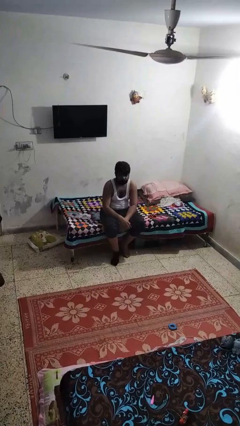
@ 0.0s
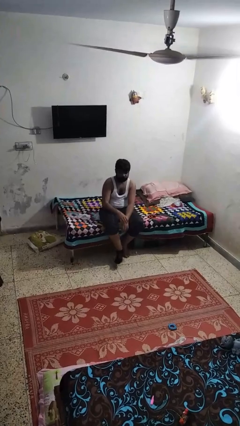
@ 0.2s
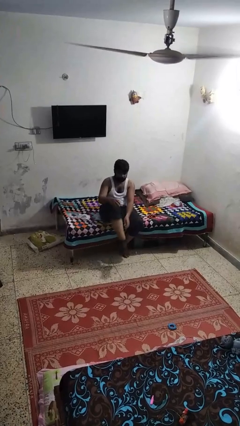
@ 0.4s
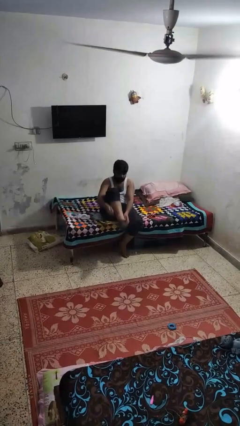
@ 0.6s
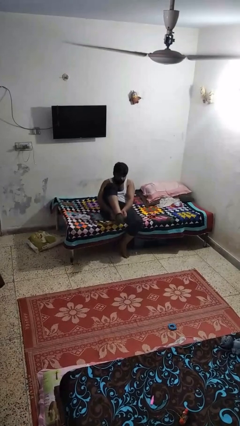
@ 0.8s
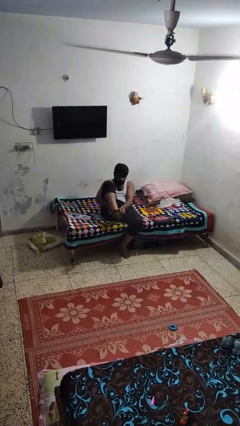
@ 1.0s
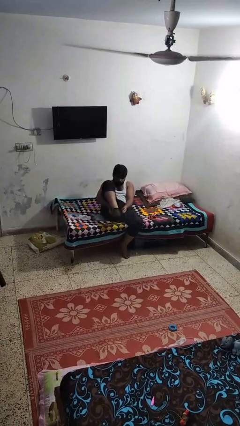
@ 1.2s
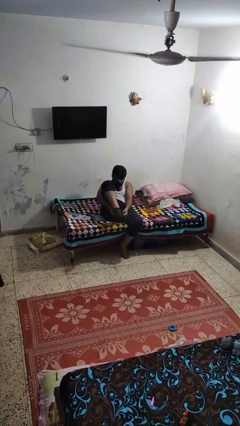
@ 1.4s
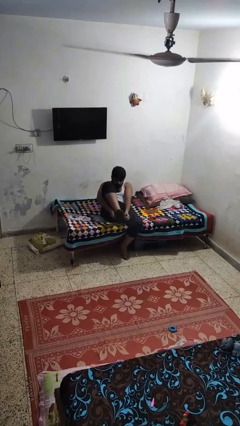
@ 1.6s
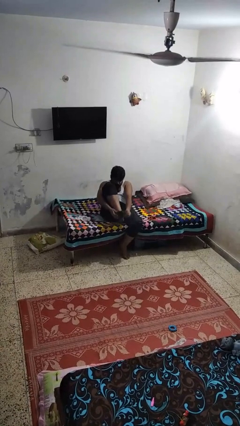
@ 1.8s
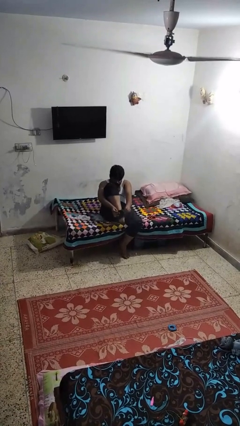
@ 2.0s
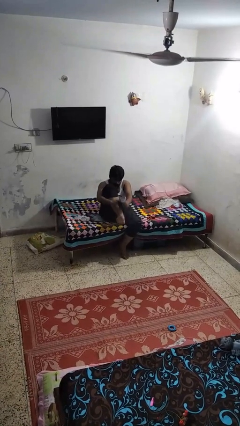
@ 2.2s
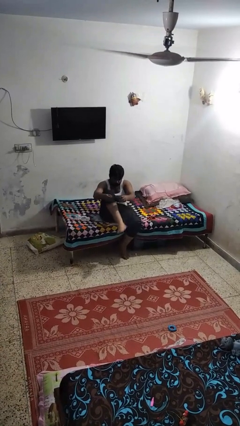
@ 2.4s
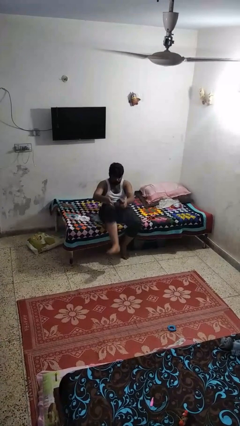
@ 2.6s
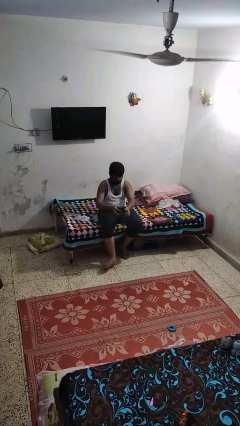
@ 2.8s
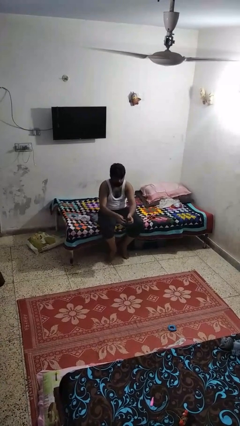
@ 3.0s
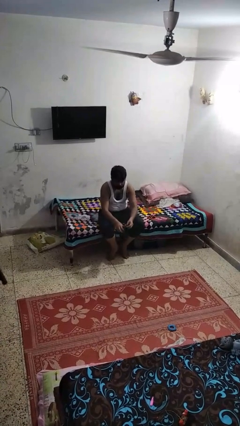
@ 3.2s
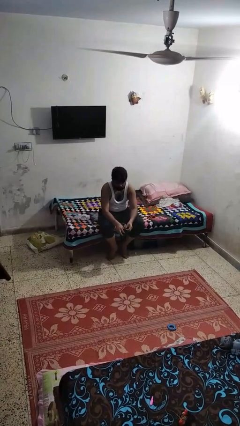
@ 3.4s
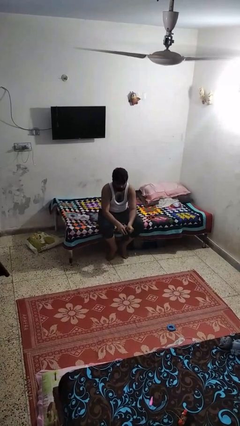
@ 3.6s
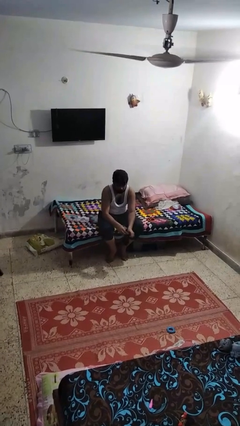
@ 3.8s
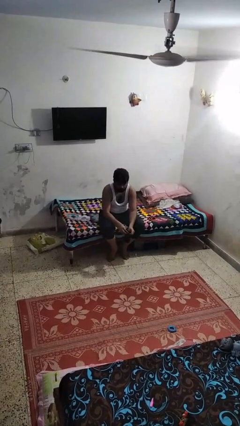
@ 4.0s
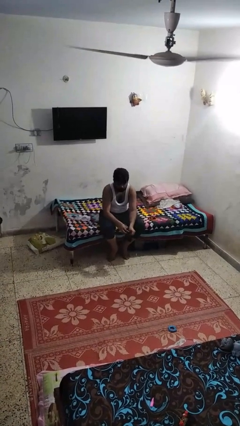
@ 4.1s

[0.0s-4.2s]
person takes off socks

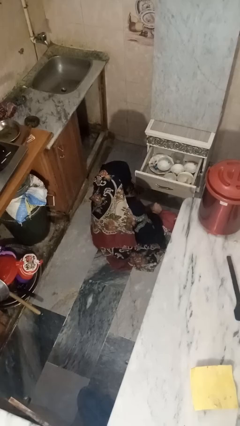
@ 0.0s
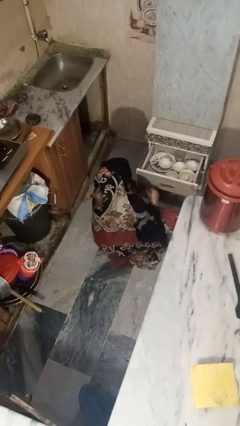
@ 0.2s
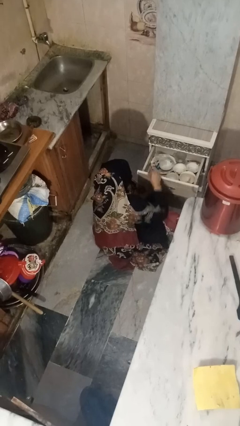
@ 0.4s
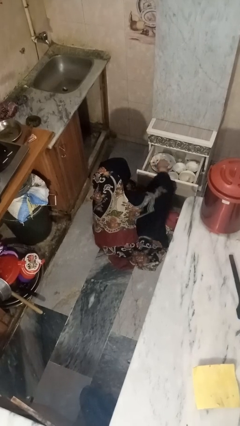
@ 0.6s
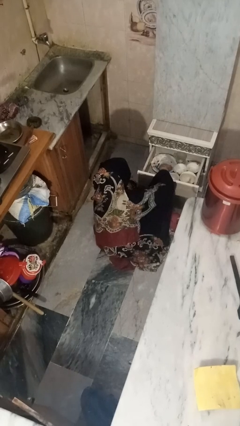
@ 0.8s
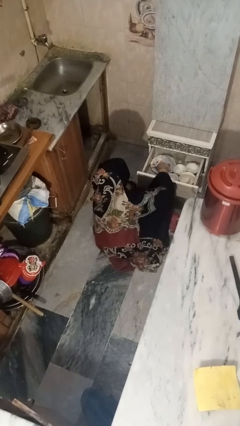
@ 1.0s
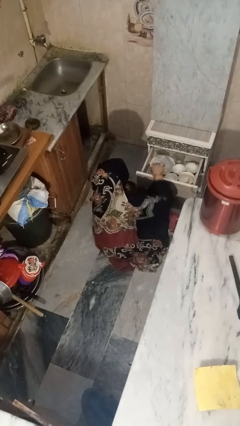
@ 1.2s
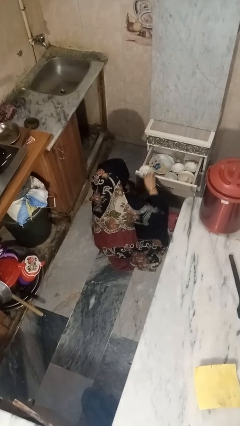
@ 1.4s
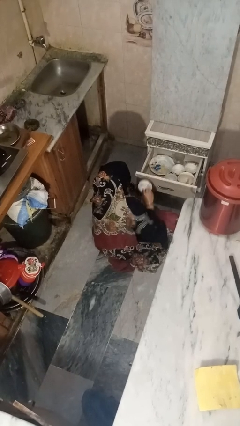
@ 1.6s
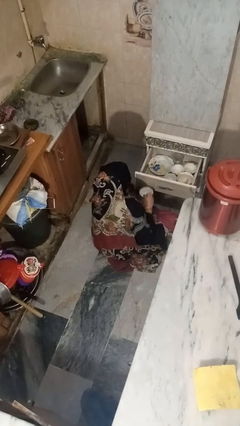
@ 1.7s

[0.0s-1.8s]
person takes object from kitchen drawer

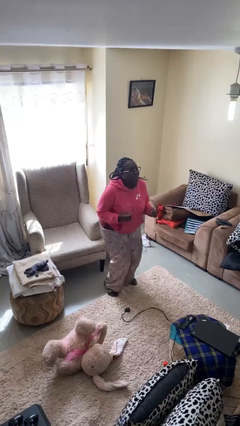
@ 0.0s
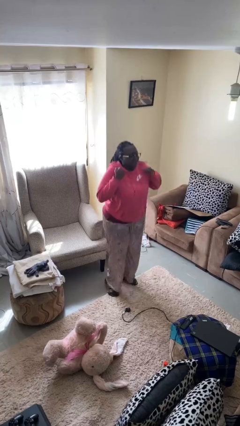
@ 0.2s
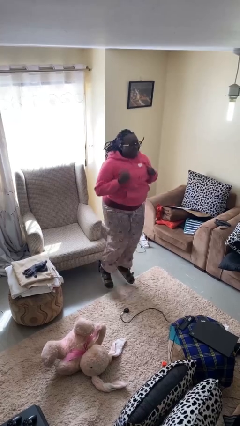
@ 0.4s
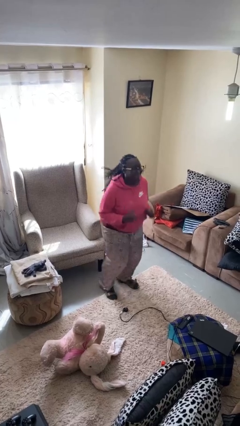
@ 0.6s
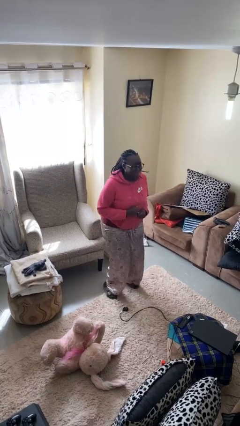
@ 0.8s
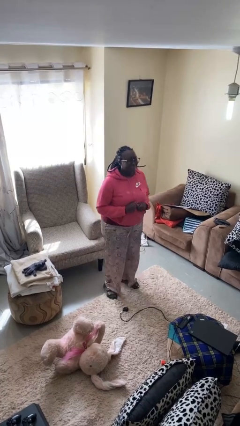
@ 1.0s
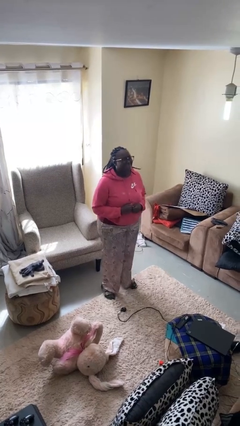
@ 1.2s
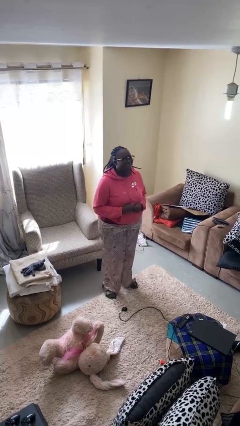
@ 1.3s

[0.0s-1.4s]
person jumps

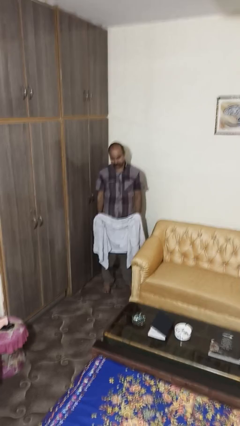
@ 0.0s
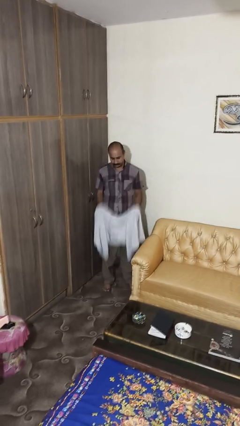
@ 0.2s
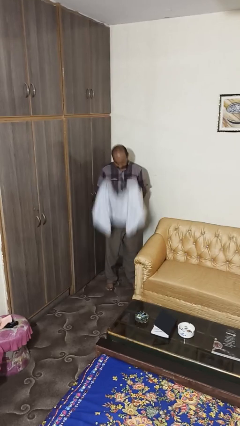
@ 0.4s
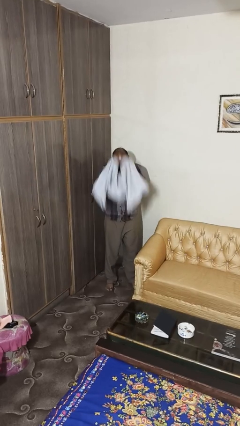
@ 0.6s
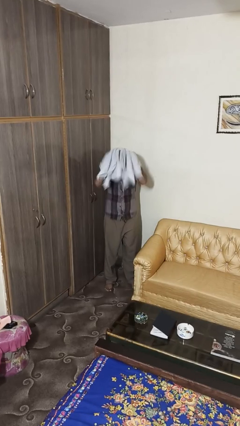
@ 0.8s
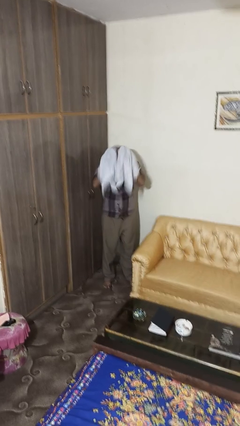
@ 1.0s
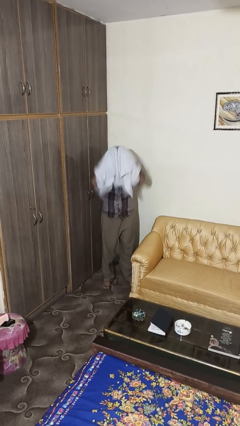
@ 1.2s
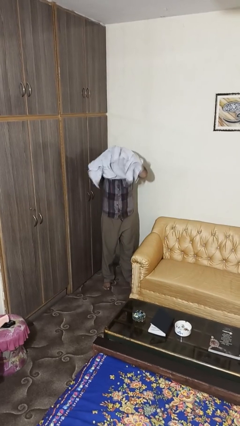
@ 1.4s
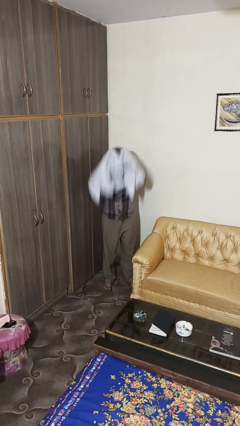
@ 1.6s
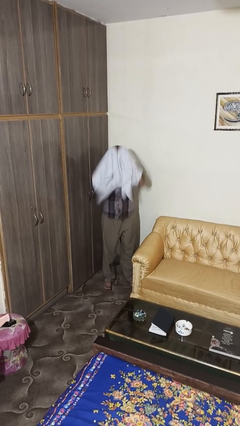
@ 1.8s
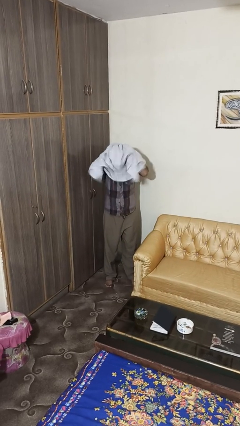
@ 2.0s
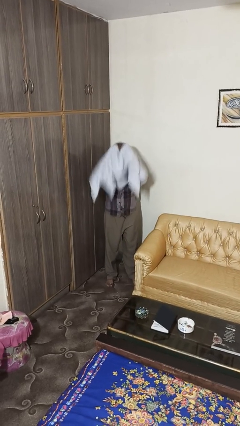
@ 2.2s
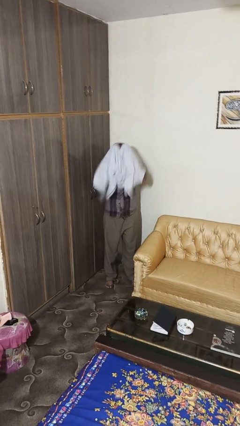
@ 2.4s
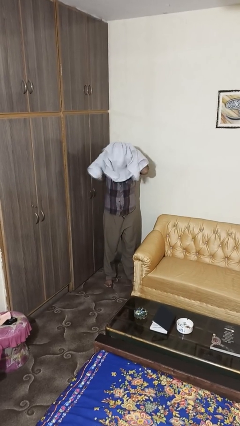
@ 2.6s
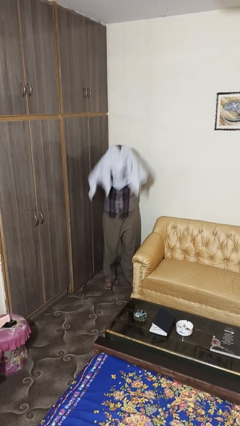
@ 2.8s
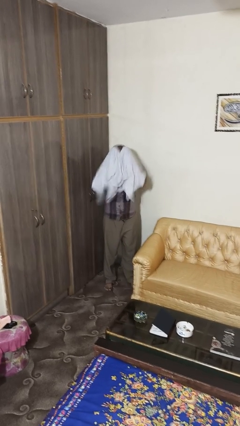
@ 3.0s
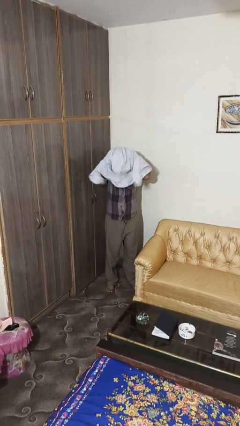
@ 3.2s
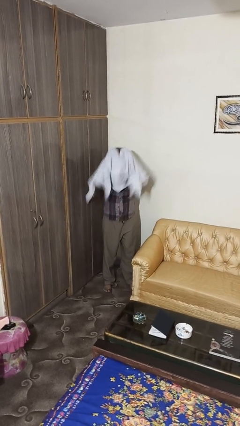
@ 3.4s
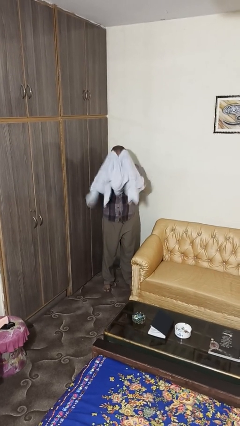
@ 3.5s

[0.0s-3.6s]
person dries hair with towel

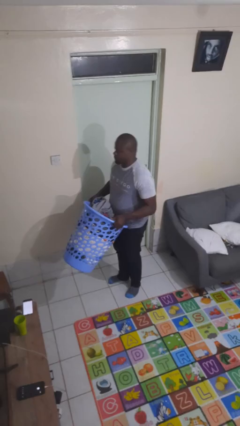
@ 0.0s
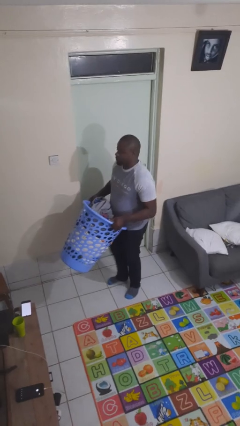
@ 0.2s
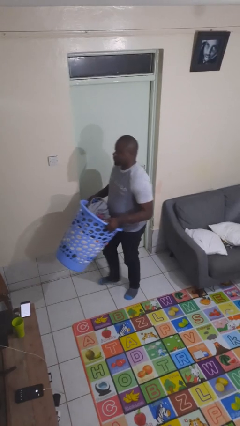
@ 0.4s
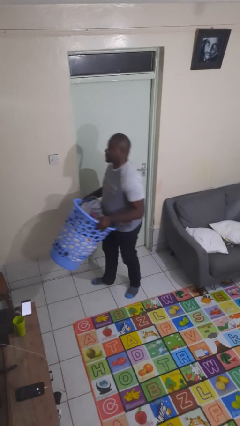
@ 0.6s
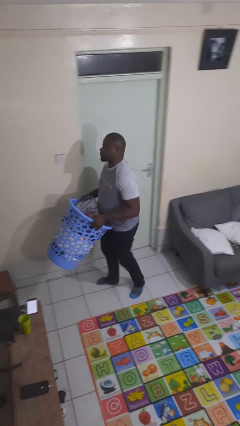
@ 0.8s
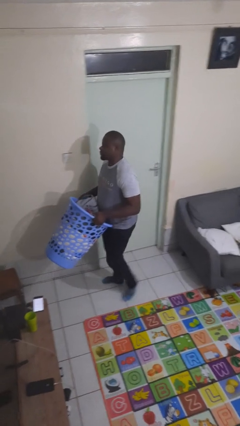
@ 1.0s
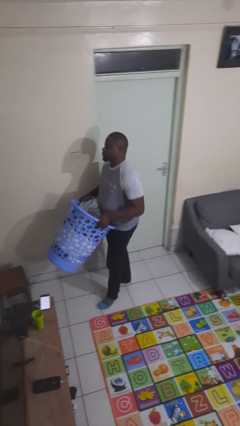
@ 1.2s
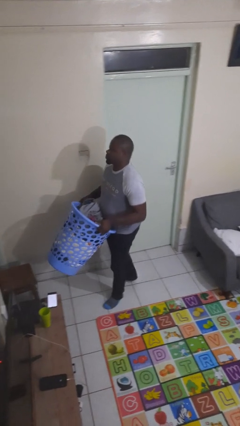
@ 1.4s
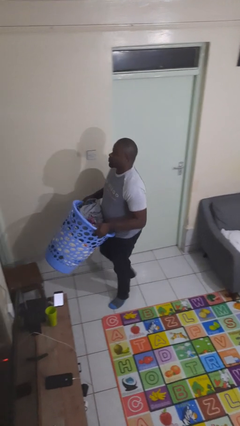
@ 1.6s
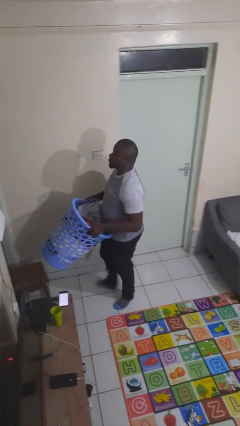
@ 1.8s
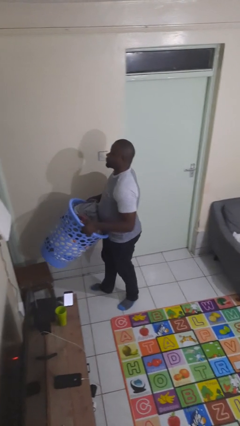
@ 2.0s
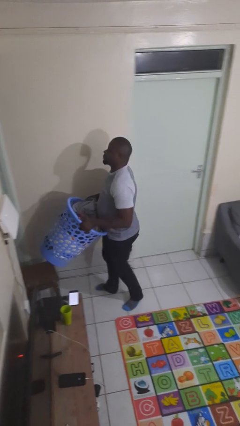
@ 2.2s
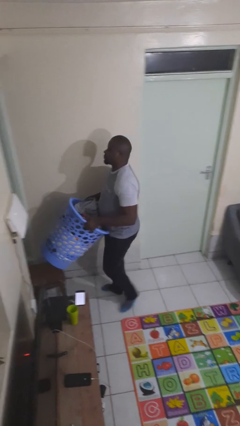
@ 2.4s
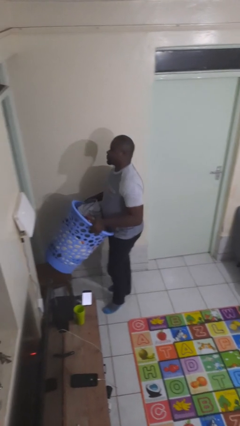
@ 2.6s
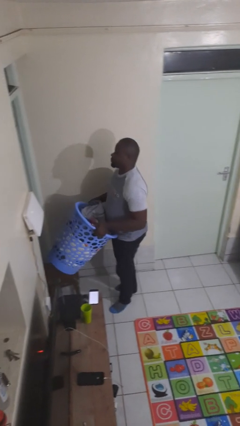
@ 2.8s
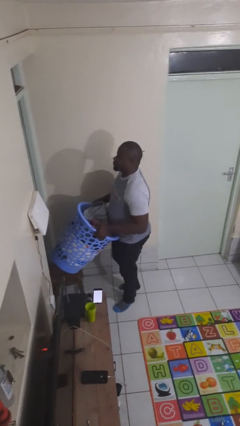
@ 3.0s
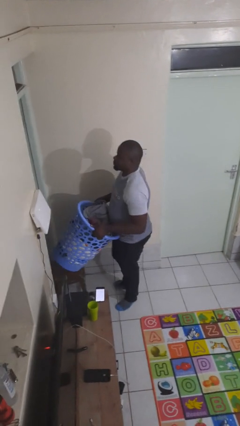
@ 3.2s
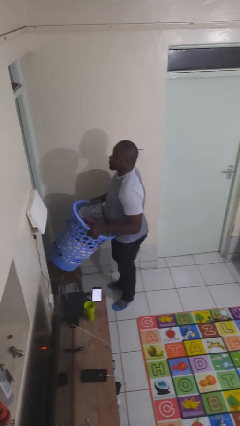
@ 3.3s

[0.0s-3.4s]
person carries laundry basket

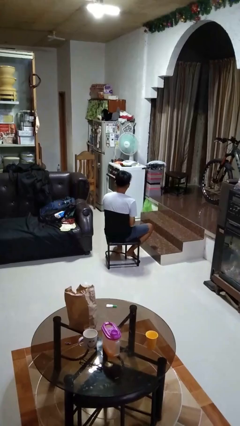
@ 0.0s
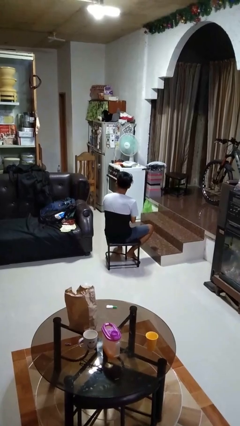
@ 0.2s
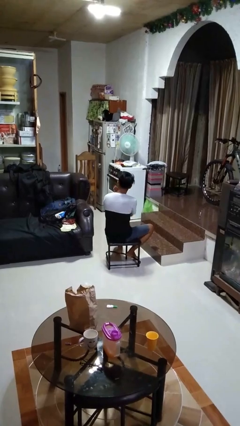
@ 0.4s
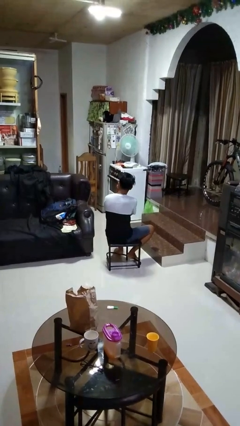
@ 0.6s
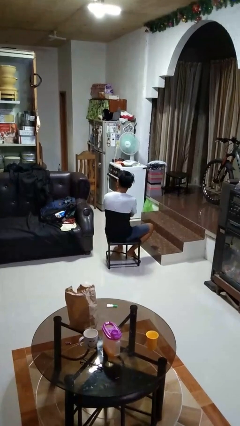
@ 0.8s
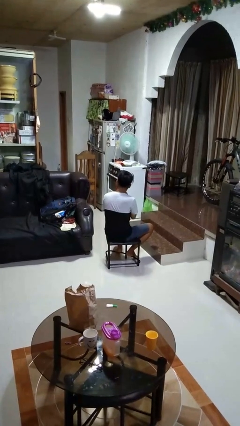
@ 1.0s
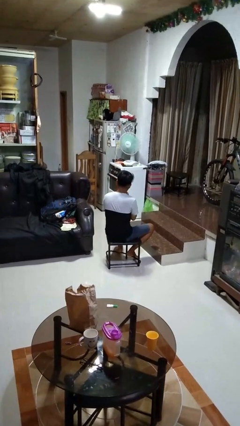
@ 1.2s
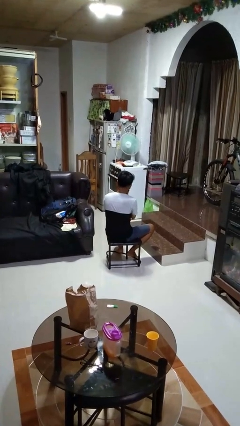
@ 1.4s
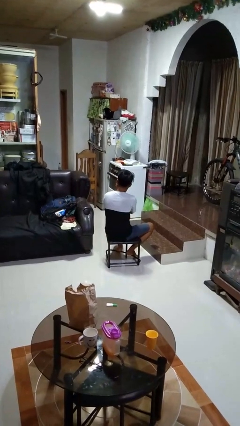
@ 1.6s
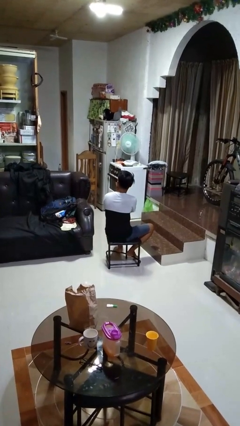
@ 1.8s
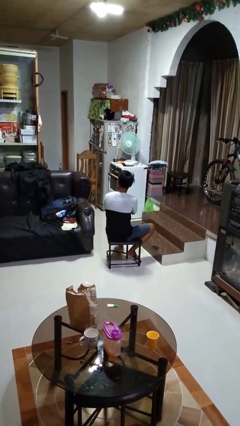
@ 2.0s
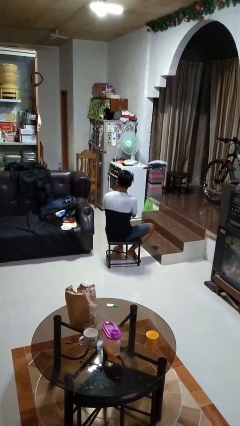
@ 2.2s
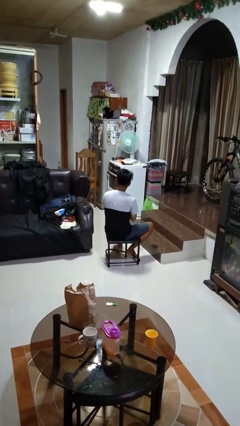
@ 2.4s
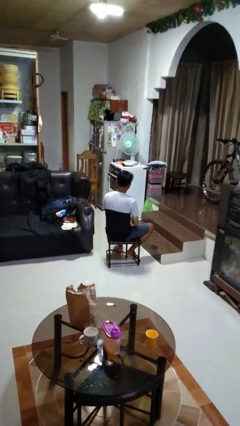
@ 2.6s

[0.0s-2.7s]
person strokes chin

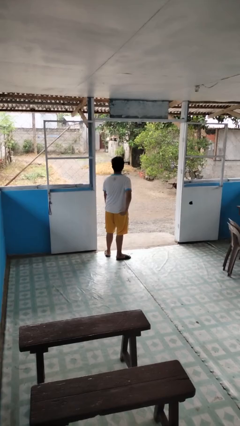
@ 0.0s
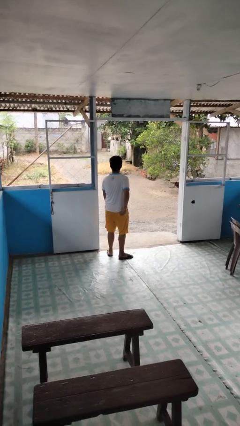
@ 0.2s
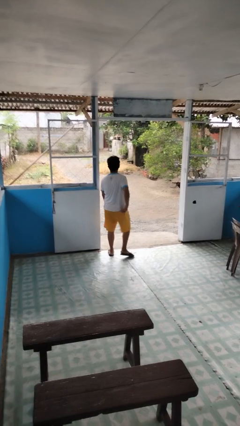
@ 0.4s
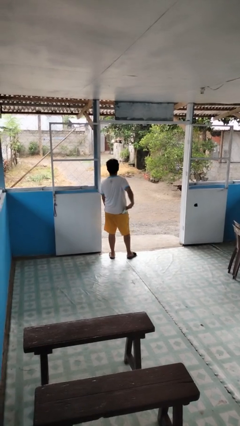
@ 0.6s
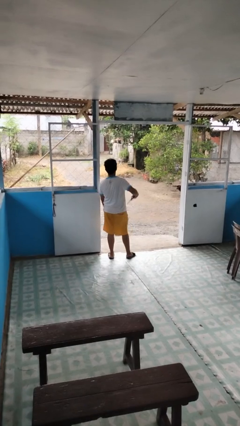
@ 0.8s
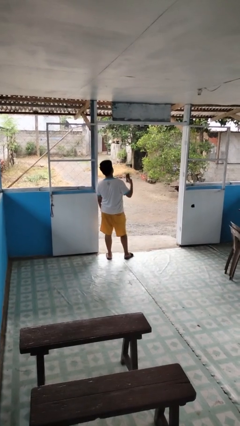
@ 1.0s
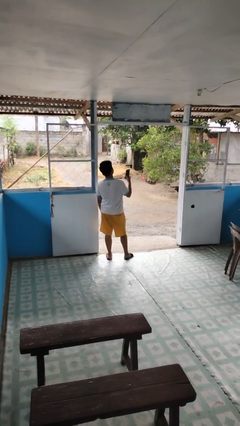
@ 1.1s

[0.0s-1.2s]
person takes phone from pocket
